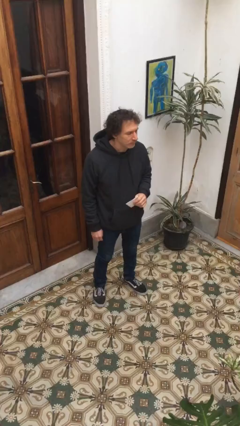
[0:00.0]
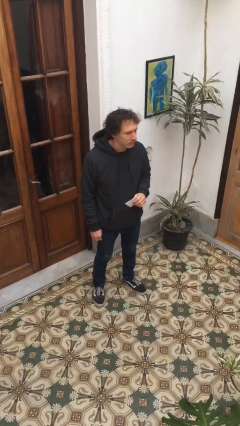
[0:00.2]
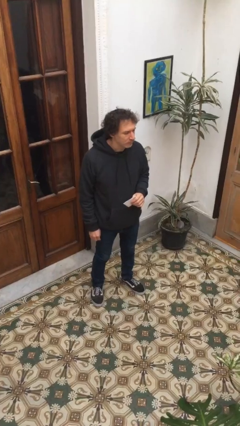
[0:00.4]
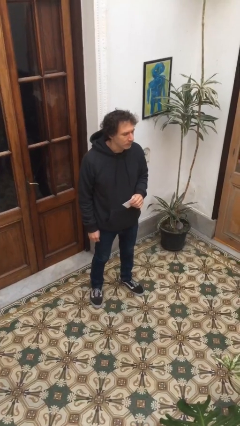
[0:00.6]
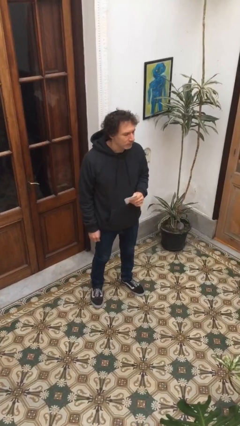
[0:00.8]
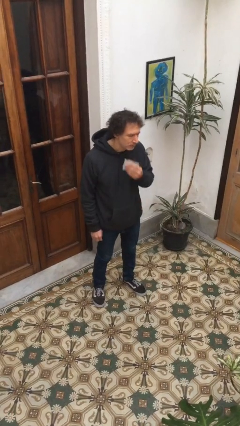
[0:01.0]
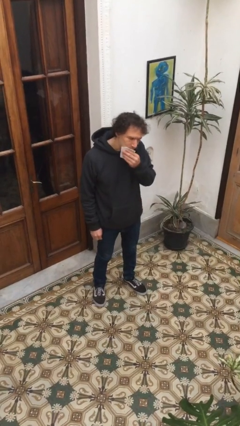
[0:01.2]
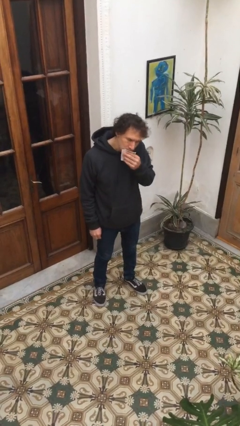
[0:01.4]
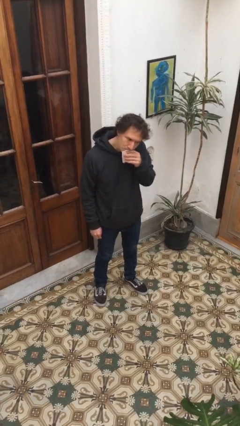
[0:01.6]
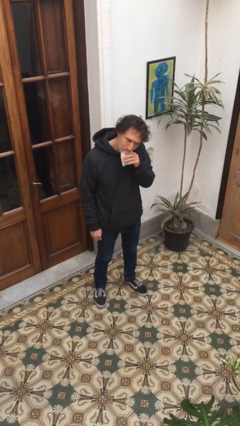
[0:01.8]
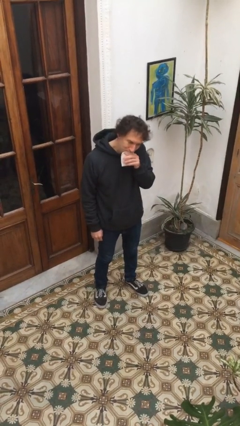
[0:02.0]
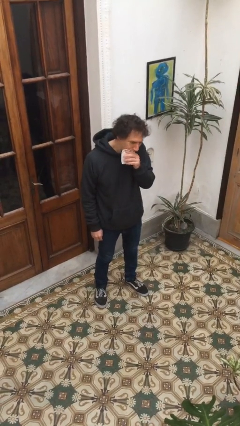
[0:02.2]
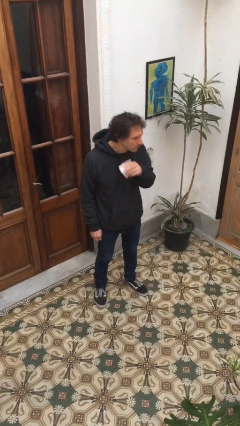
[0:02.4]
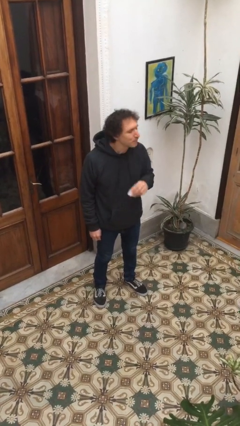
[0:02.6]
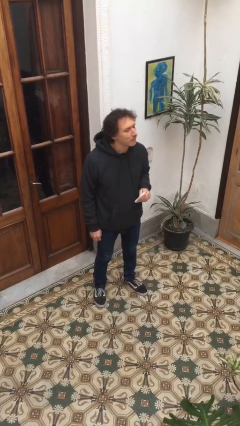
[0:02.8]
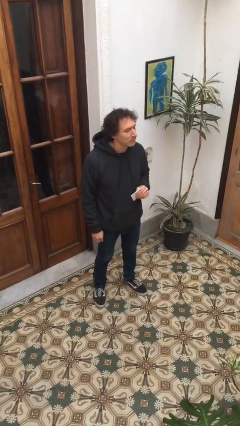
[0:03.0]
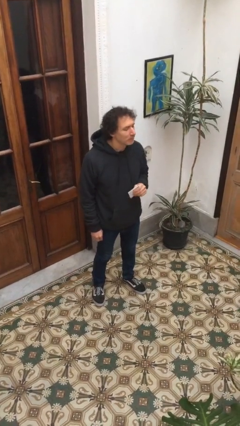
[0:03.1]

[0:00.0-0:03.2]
person wipes mouth with napkin

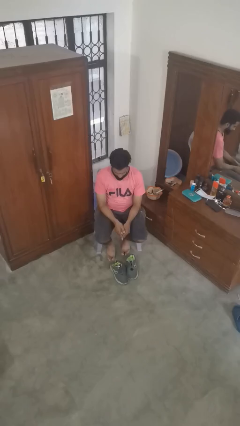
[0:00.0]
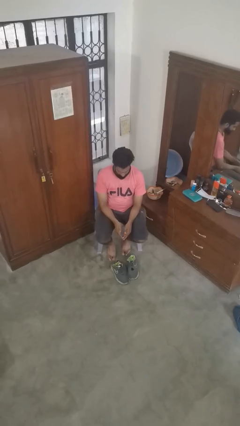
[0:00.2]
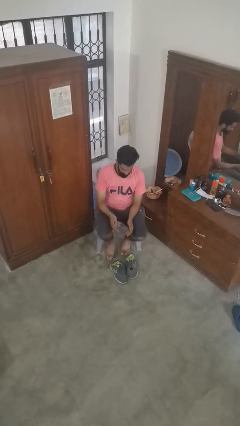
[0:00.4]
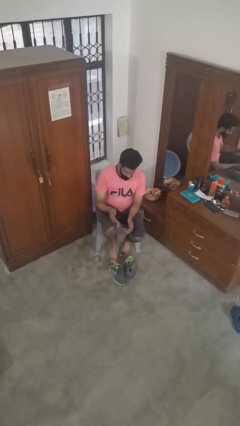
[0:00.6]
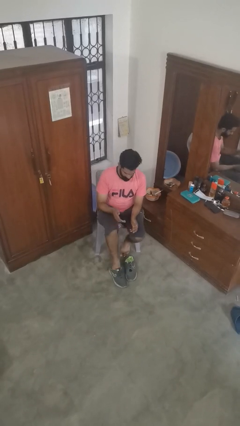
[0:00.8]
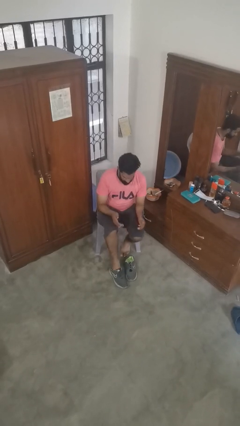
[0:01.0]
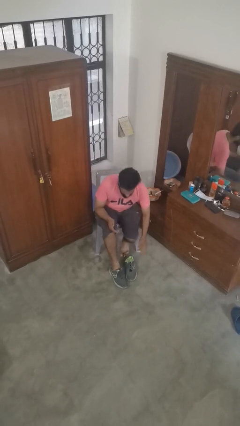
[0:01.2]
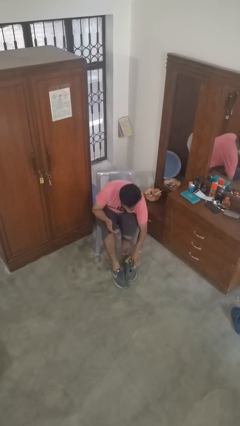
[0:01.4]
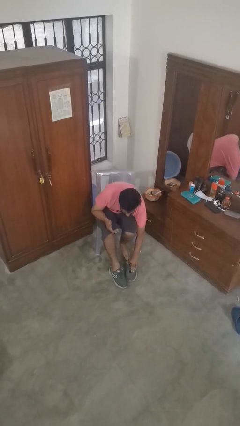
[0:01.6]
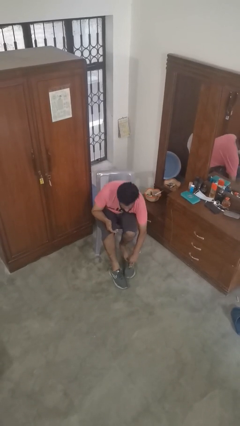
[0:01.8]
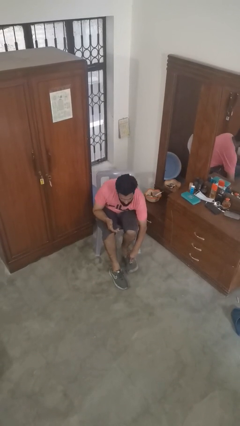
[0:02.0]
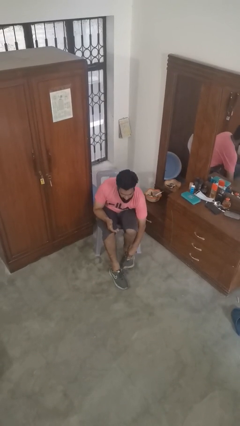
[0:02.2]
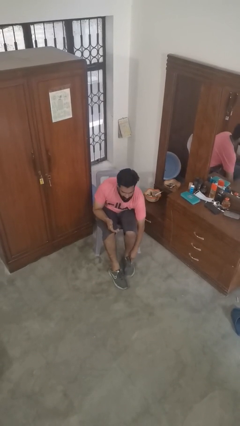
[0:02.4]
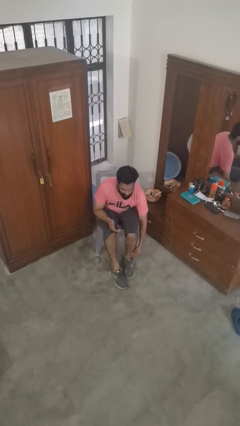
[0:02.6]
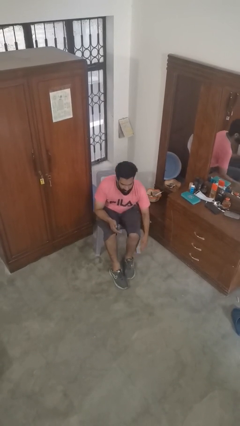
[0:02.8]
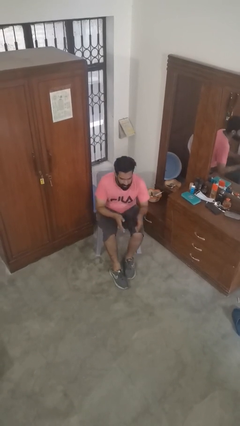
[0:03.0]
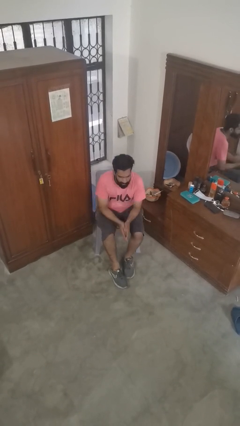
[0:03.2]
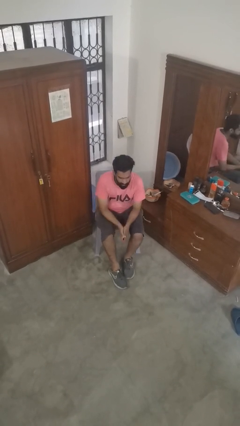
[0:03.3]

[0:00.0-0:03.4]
person puts on shoes

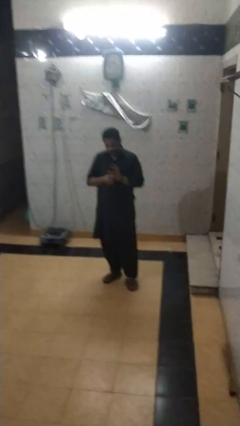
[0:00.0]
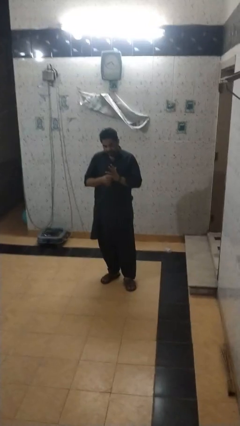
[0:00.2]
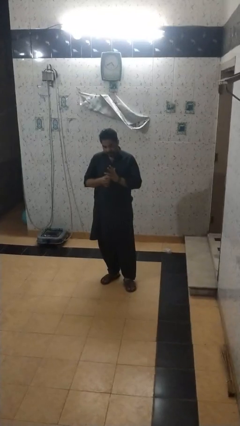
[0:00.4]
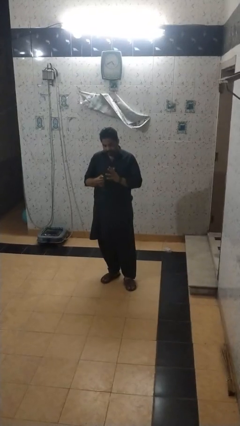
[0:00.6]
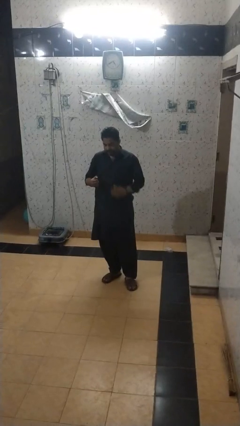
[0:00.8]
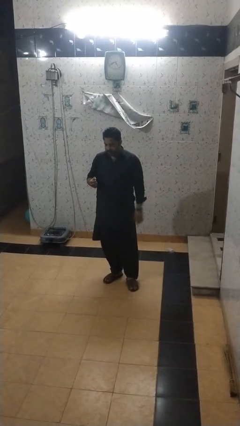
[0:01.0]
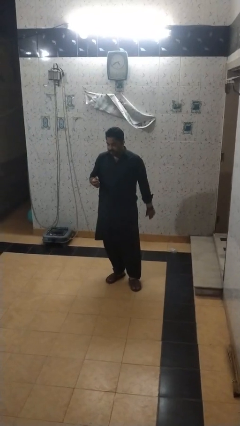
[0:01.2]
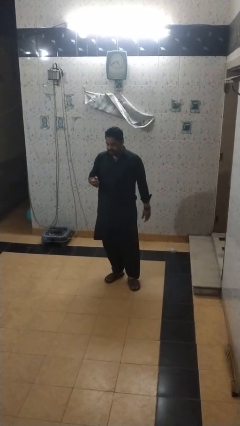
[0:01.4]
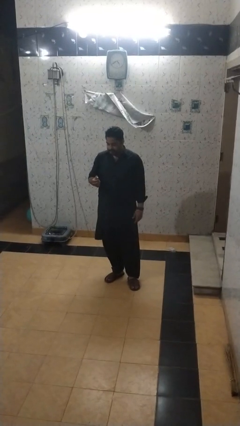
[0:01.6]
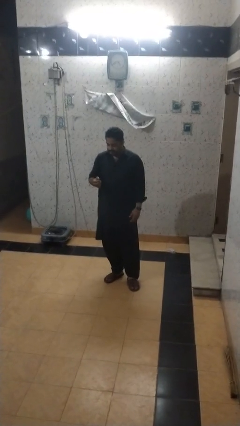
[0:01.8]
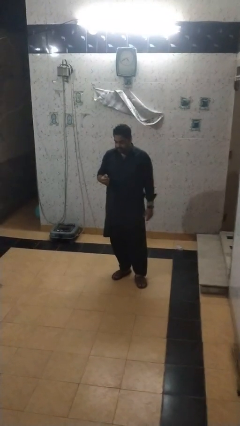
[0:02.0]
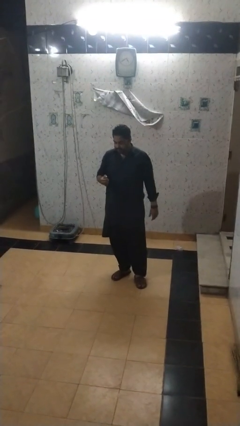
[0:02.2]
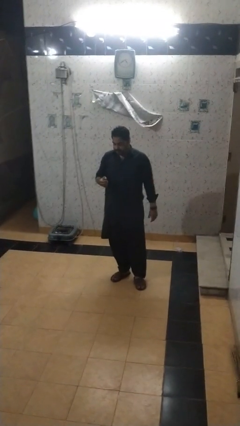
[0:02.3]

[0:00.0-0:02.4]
person takes off ring

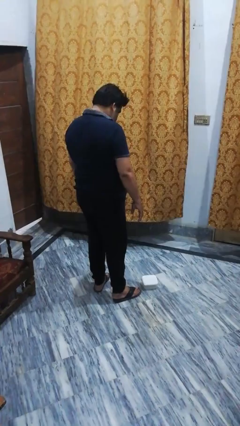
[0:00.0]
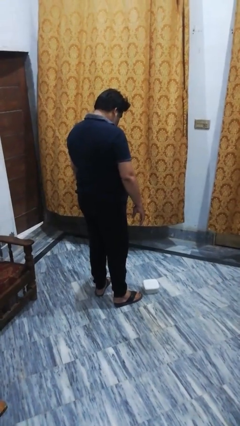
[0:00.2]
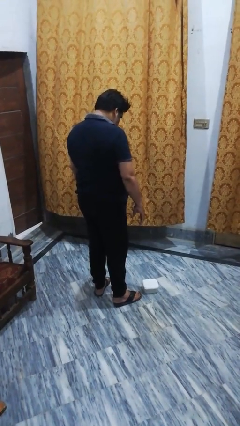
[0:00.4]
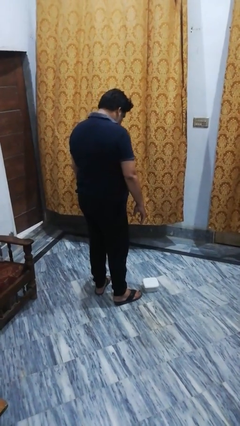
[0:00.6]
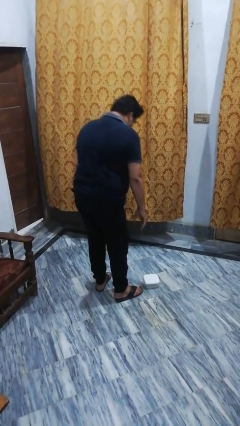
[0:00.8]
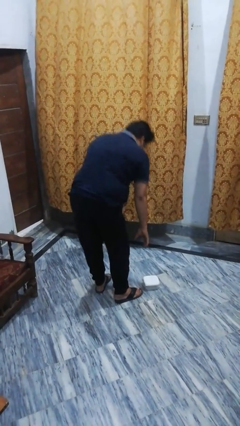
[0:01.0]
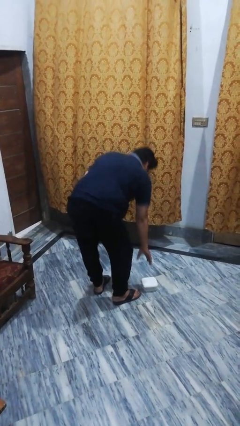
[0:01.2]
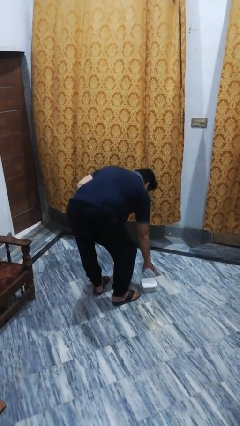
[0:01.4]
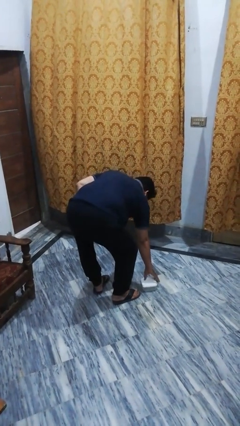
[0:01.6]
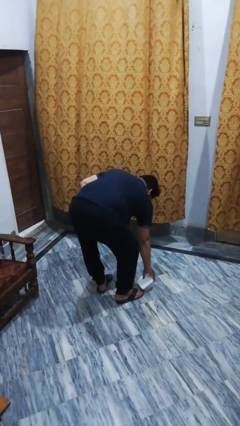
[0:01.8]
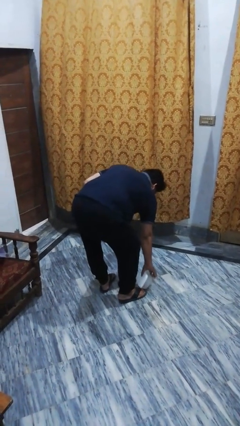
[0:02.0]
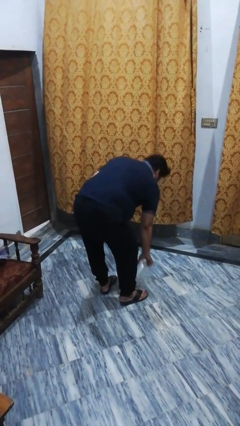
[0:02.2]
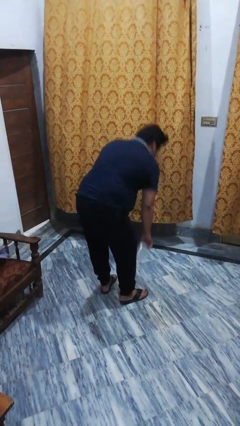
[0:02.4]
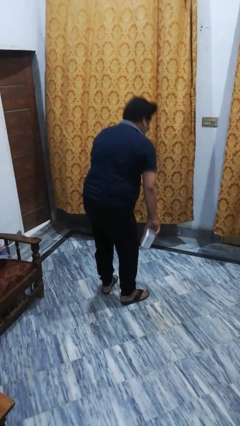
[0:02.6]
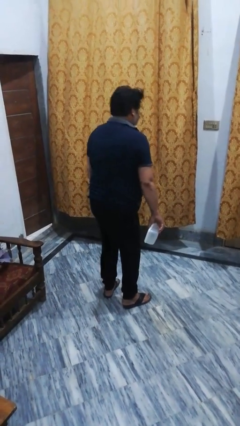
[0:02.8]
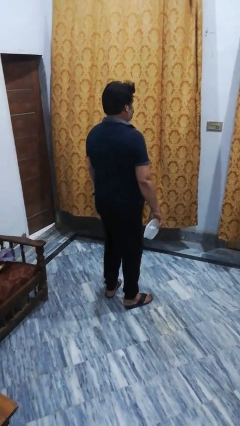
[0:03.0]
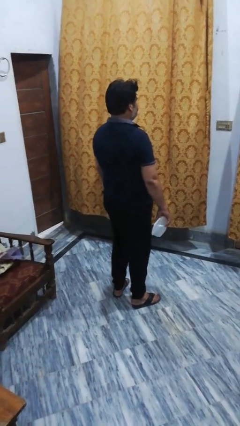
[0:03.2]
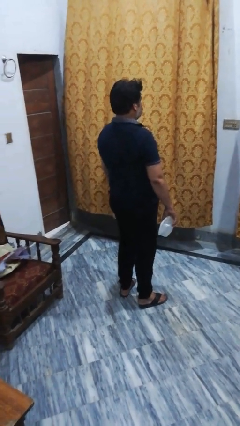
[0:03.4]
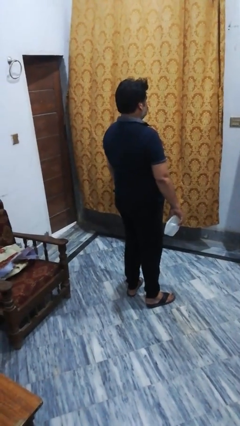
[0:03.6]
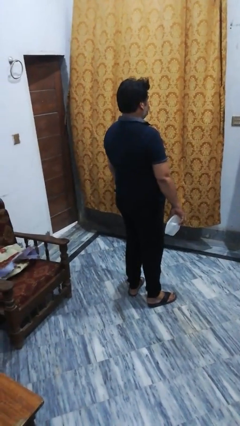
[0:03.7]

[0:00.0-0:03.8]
person picks up object from floor

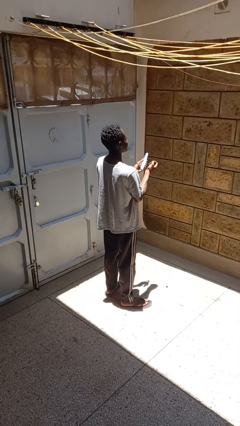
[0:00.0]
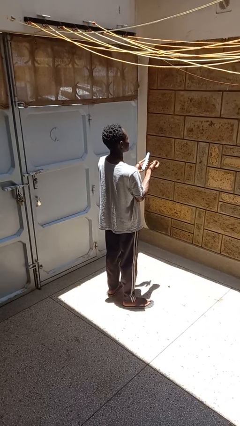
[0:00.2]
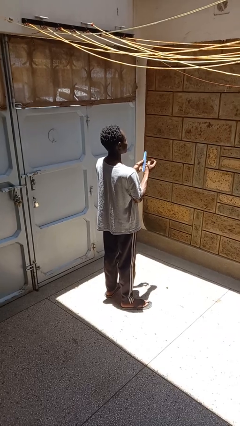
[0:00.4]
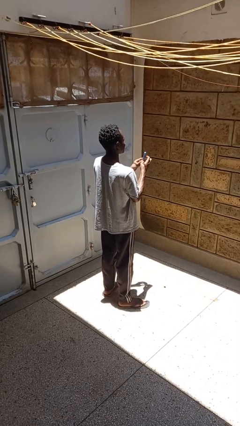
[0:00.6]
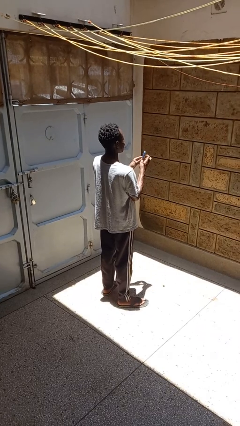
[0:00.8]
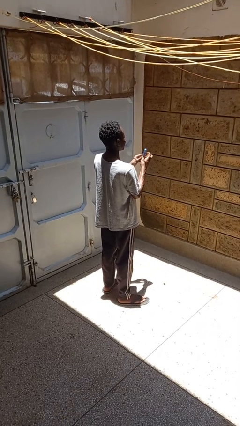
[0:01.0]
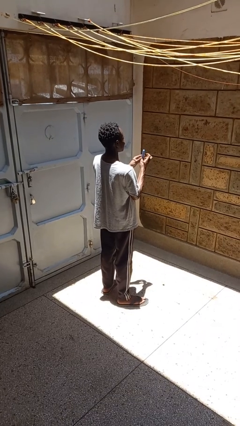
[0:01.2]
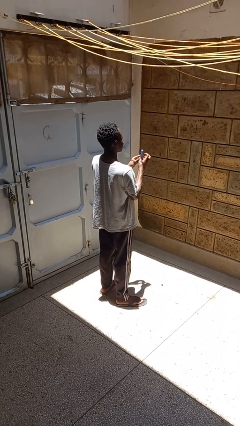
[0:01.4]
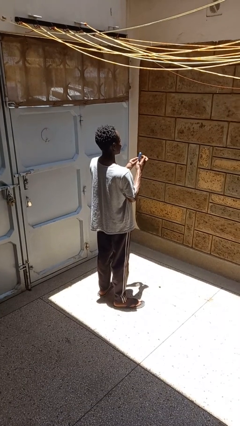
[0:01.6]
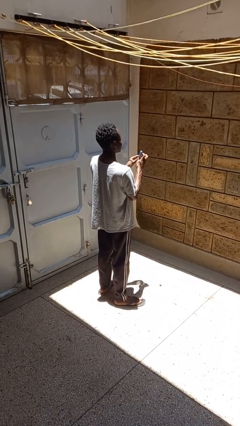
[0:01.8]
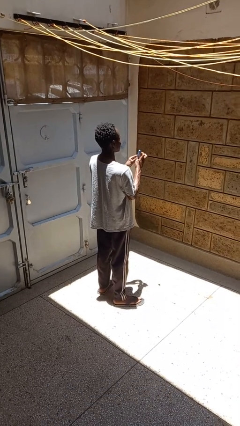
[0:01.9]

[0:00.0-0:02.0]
person files fingernails

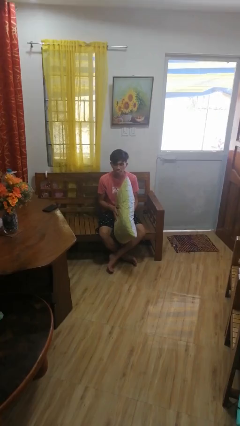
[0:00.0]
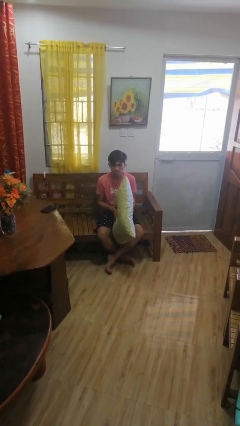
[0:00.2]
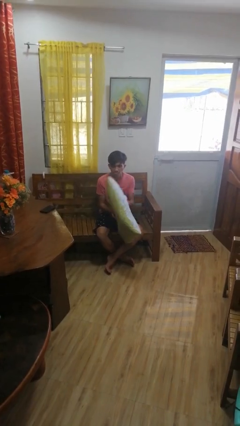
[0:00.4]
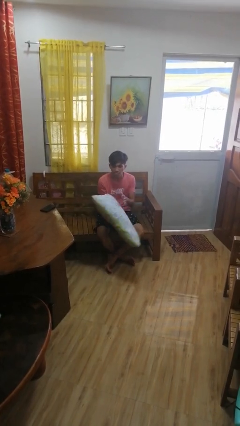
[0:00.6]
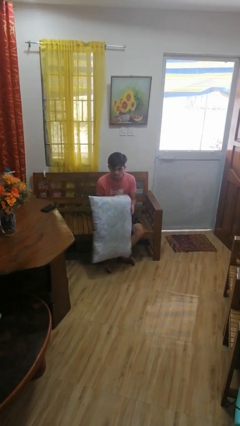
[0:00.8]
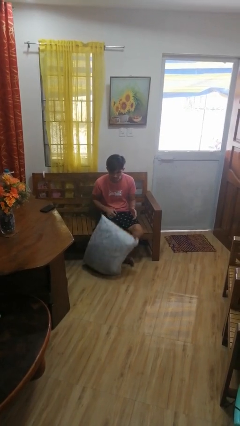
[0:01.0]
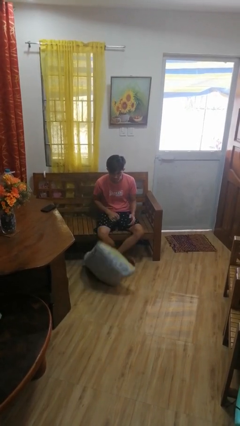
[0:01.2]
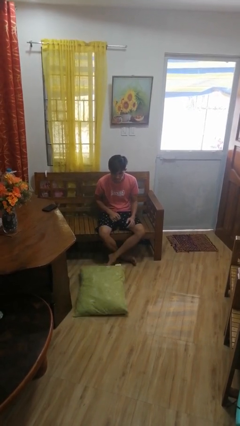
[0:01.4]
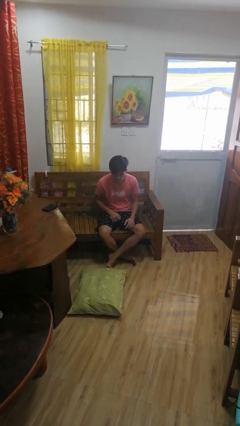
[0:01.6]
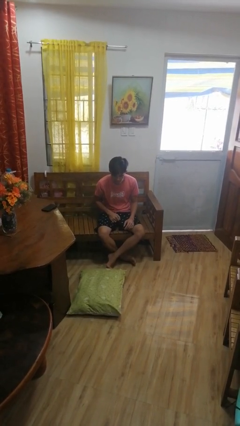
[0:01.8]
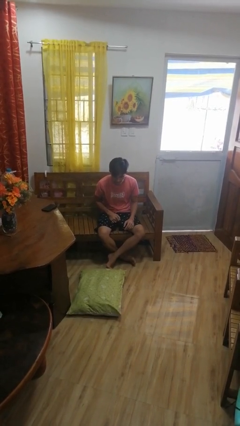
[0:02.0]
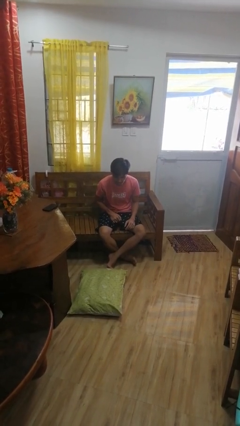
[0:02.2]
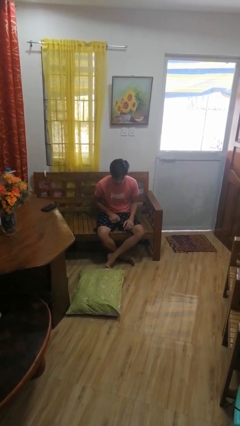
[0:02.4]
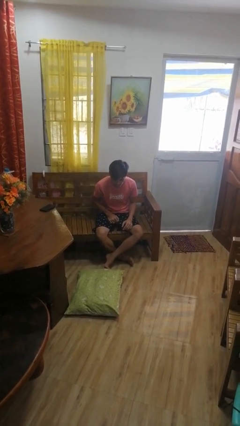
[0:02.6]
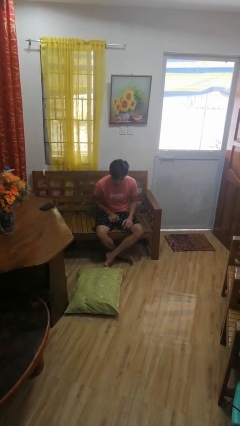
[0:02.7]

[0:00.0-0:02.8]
person drops object
